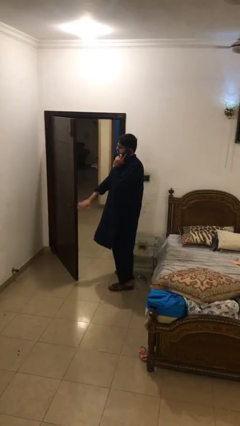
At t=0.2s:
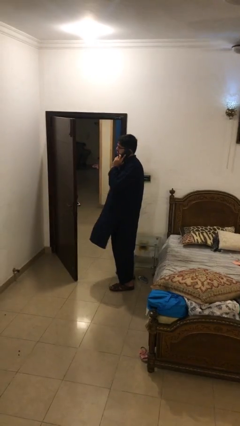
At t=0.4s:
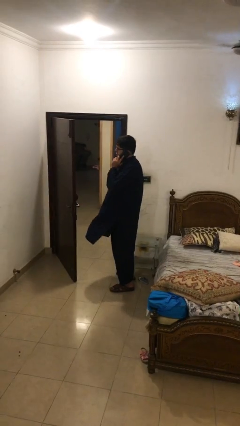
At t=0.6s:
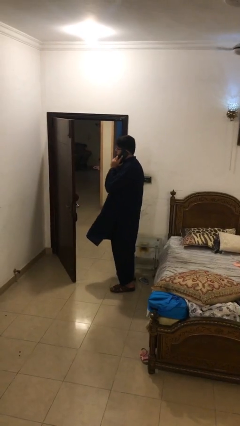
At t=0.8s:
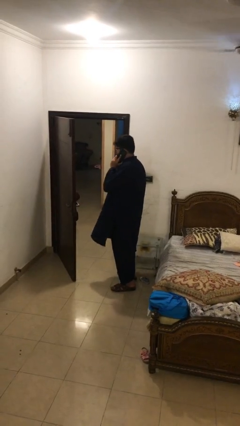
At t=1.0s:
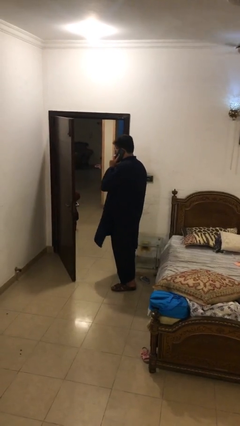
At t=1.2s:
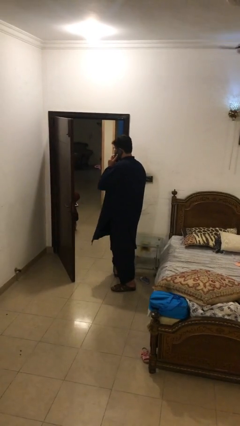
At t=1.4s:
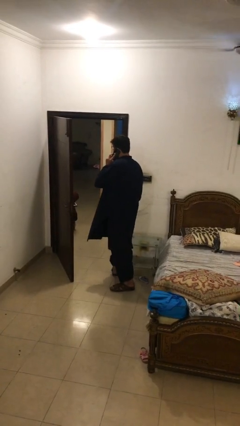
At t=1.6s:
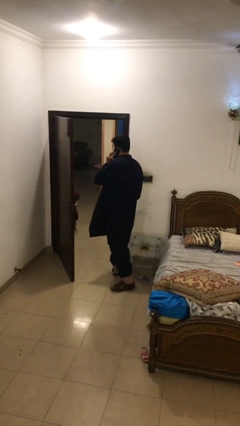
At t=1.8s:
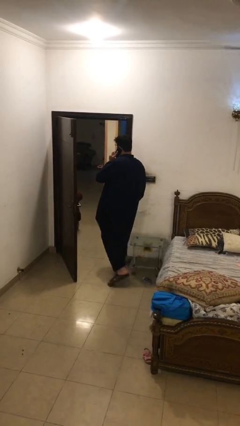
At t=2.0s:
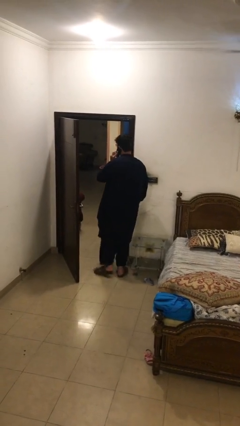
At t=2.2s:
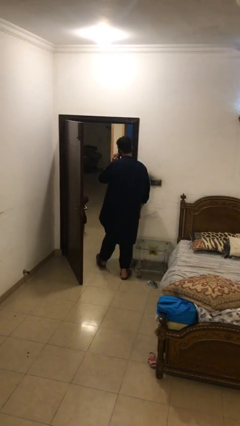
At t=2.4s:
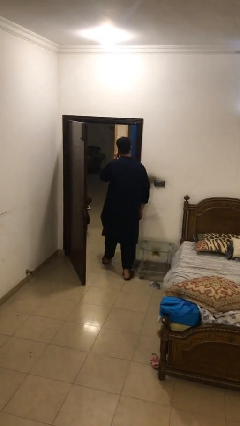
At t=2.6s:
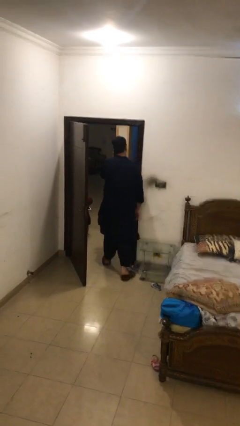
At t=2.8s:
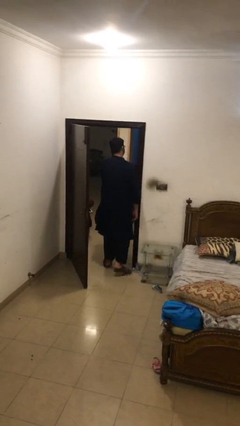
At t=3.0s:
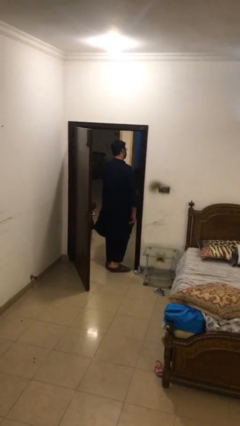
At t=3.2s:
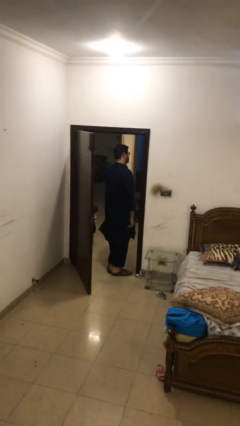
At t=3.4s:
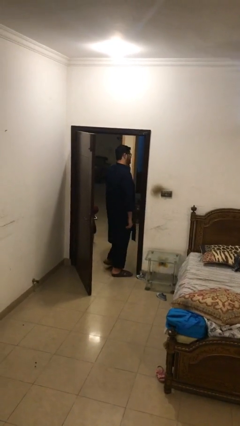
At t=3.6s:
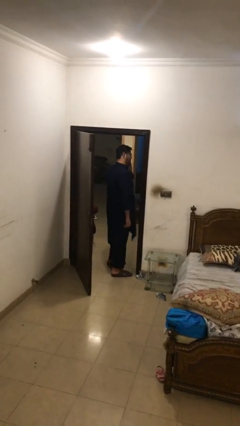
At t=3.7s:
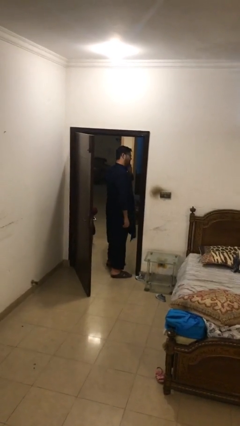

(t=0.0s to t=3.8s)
person exits scene through structure

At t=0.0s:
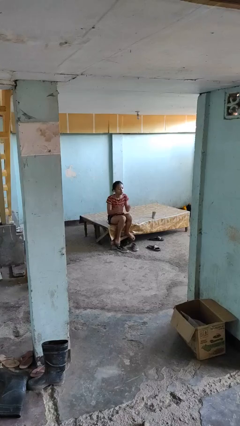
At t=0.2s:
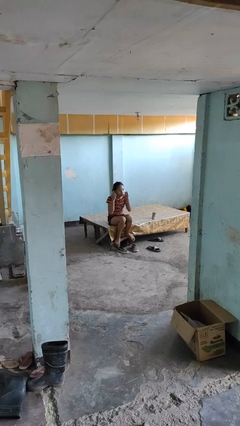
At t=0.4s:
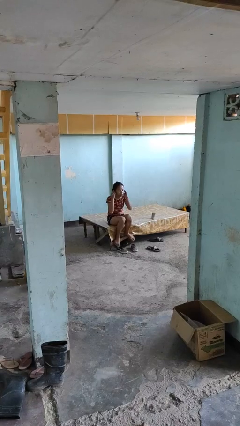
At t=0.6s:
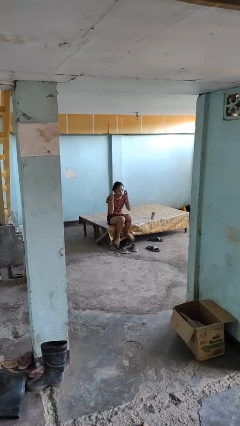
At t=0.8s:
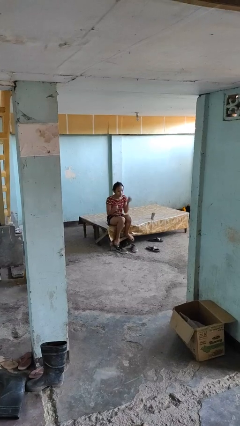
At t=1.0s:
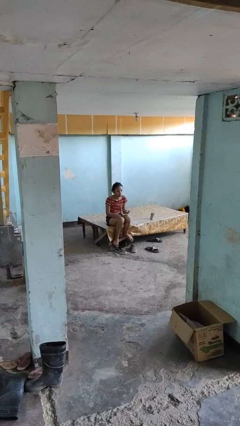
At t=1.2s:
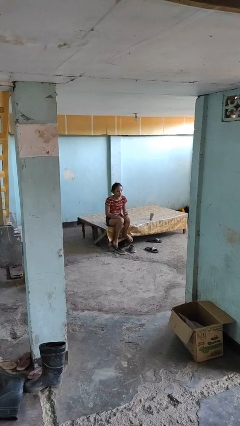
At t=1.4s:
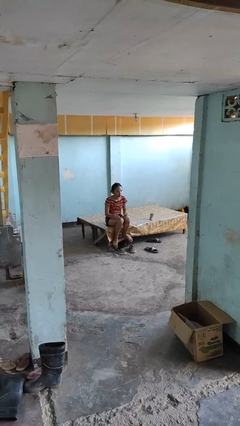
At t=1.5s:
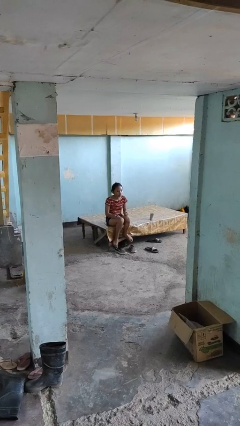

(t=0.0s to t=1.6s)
person takes off headphones

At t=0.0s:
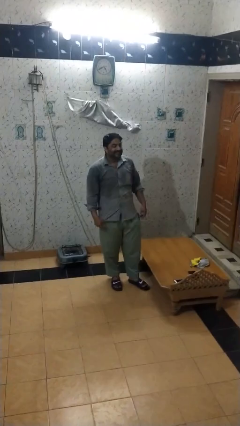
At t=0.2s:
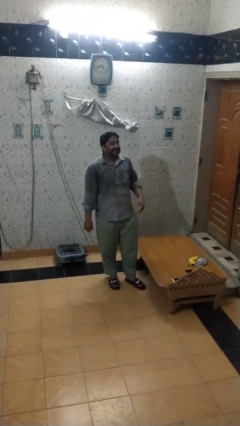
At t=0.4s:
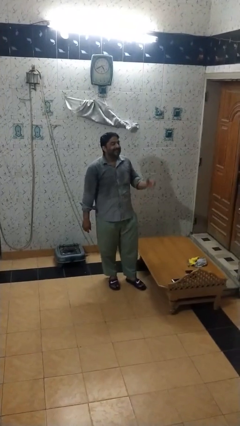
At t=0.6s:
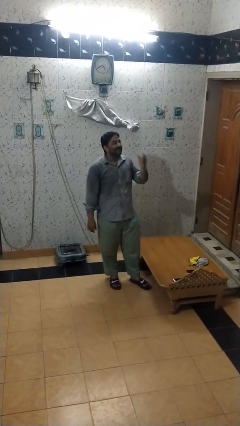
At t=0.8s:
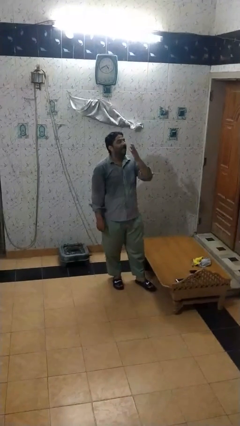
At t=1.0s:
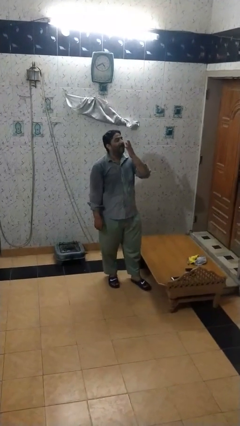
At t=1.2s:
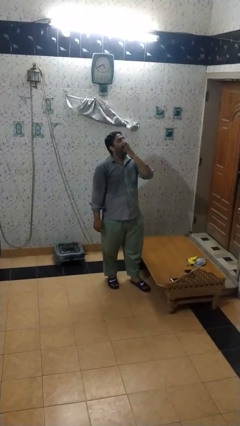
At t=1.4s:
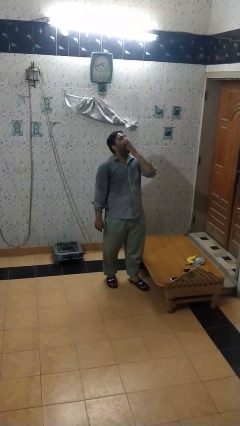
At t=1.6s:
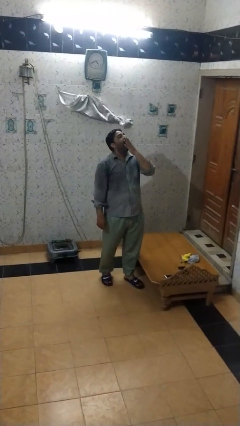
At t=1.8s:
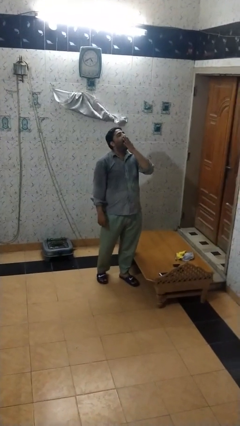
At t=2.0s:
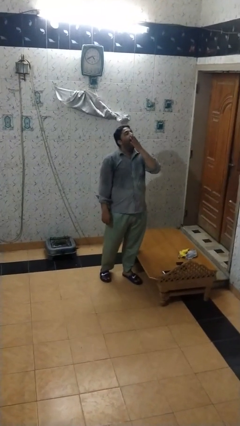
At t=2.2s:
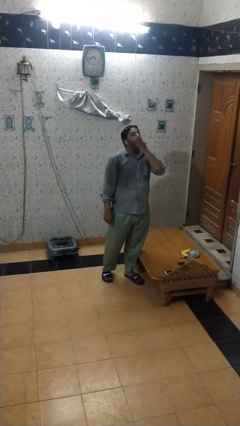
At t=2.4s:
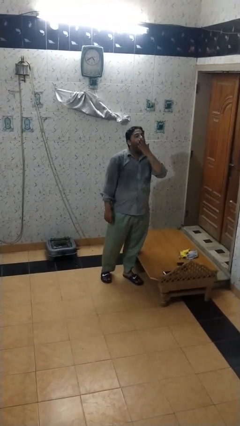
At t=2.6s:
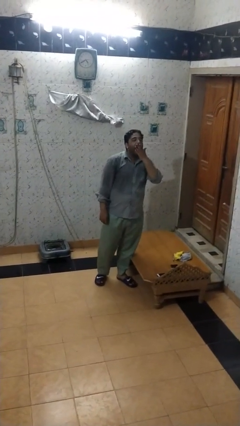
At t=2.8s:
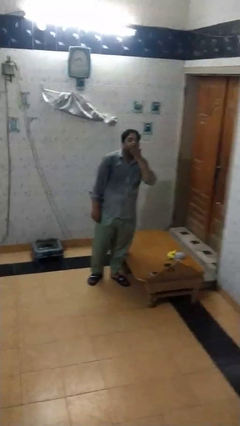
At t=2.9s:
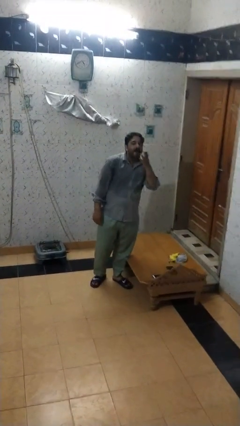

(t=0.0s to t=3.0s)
person yawns

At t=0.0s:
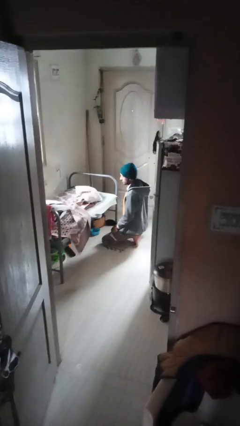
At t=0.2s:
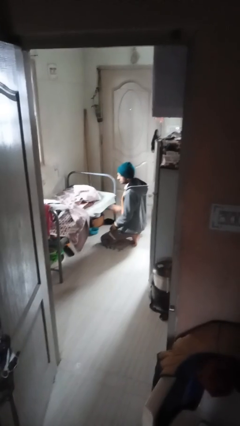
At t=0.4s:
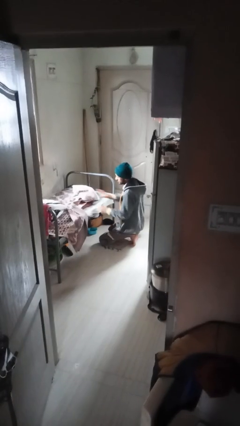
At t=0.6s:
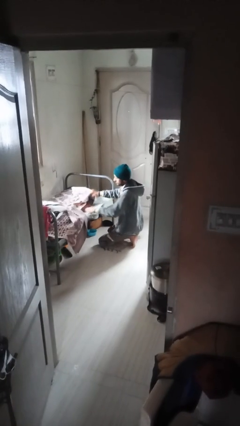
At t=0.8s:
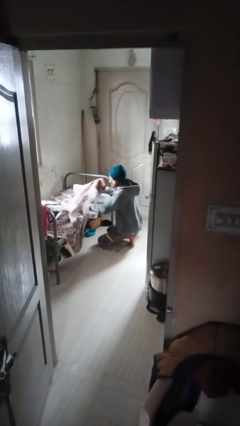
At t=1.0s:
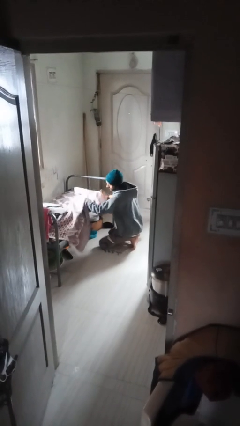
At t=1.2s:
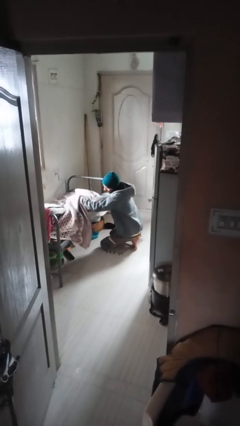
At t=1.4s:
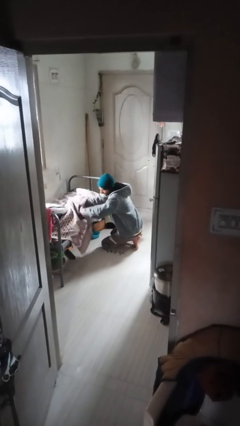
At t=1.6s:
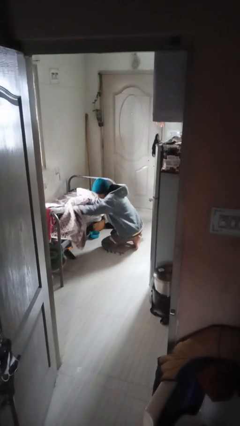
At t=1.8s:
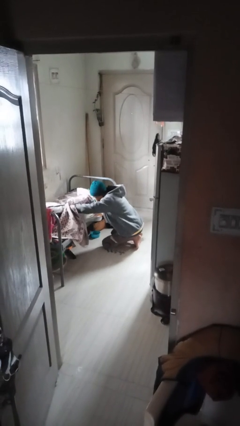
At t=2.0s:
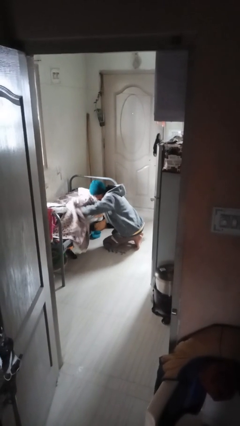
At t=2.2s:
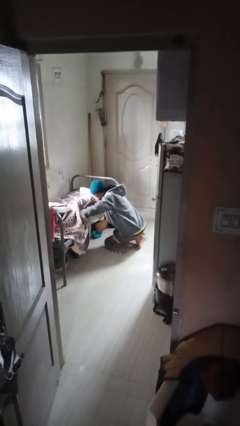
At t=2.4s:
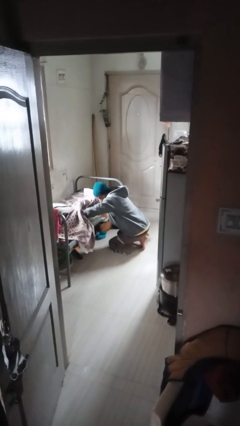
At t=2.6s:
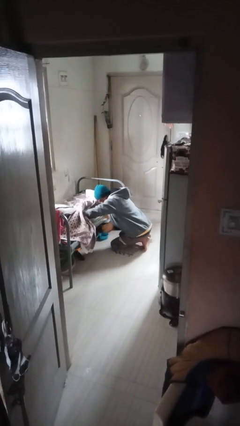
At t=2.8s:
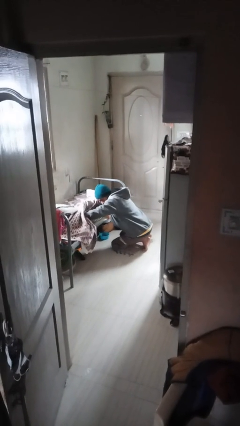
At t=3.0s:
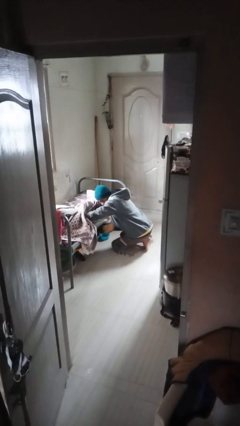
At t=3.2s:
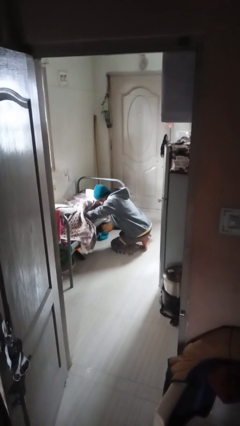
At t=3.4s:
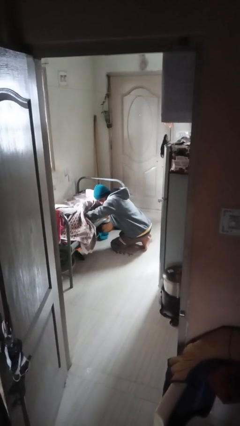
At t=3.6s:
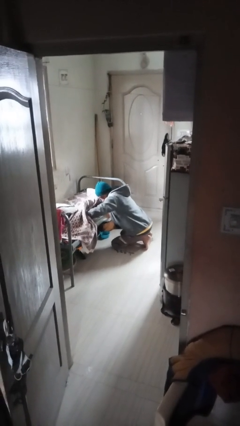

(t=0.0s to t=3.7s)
person searches under couch

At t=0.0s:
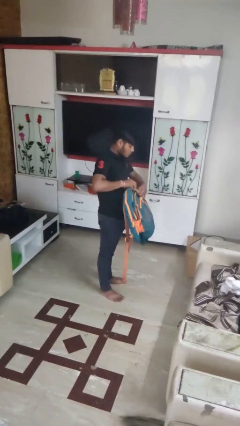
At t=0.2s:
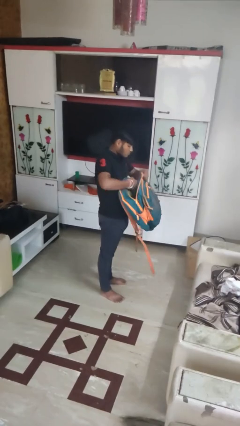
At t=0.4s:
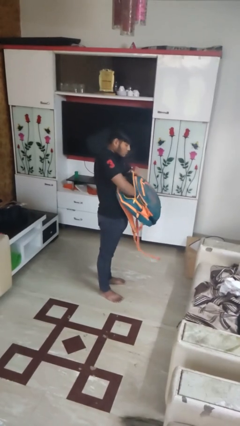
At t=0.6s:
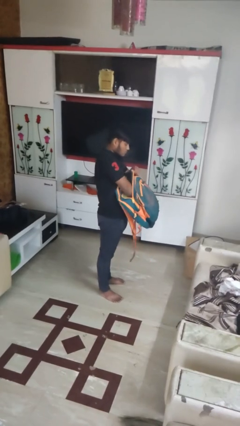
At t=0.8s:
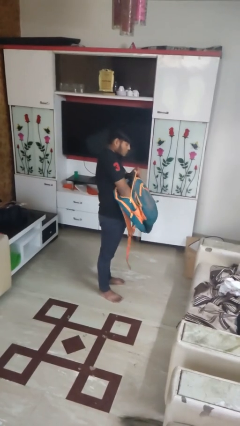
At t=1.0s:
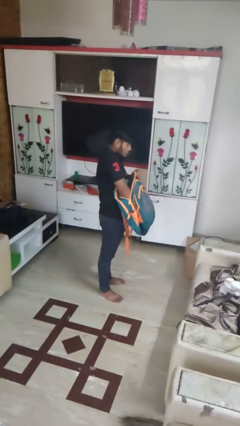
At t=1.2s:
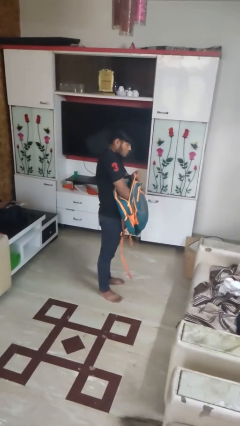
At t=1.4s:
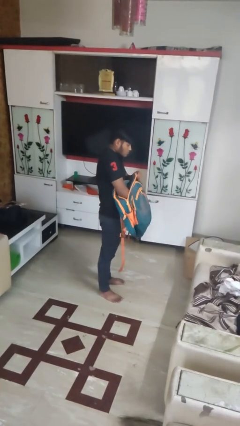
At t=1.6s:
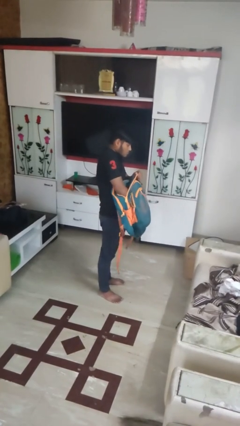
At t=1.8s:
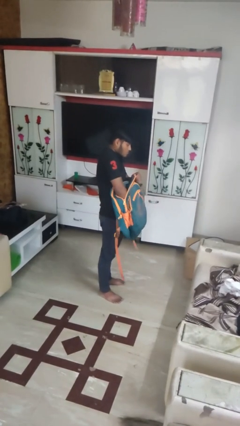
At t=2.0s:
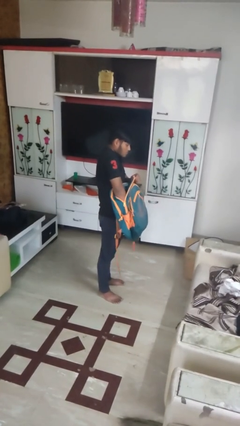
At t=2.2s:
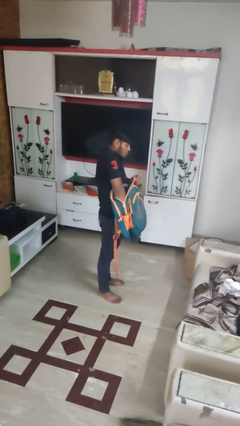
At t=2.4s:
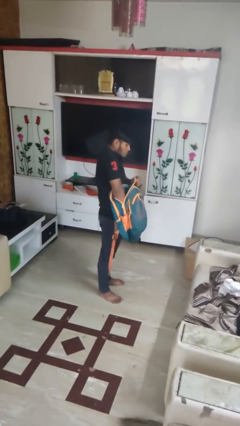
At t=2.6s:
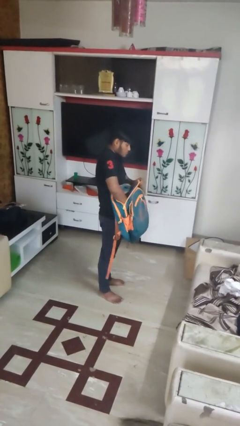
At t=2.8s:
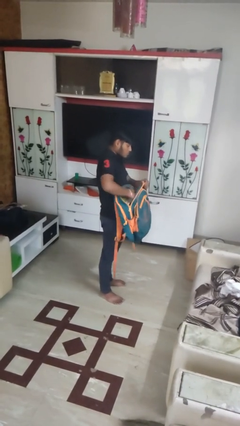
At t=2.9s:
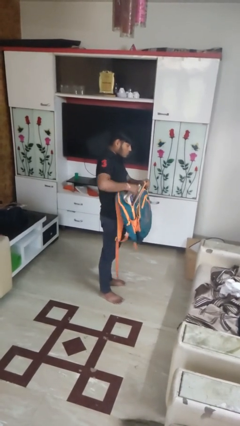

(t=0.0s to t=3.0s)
person searches in backpack

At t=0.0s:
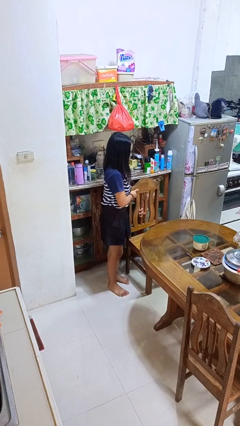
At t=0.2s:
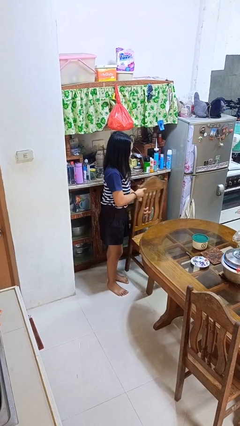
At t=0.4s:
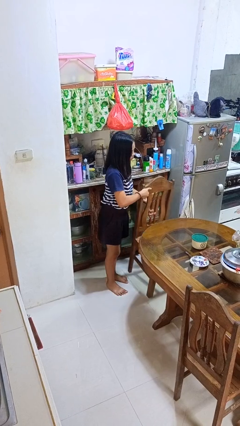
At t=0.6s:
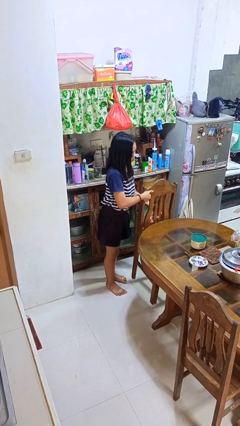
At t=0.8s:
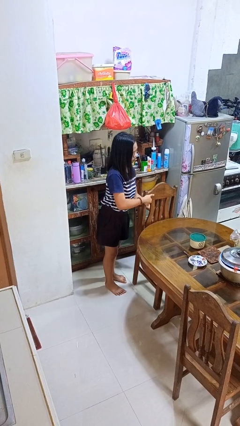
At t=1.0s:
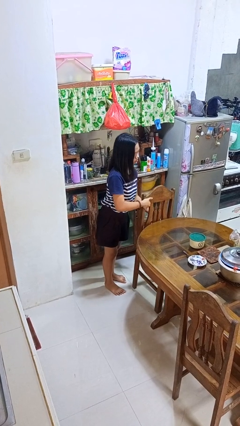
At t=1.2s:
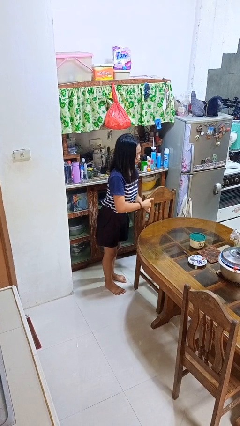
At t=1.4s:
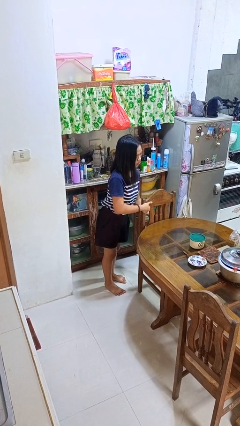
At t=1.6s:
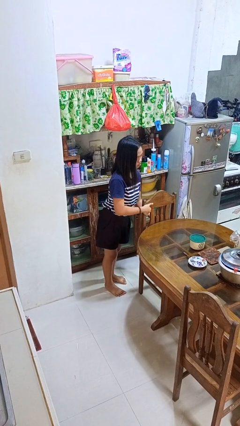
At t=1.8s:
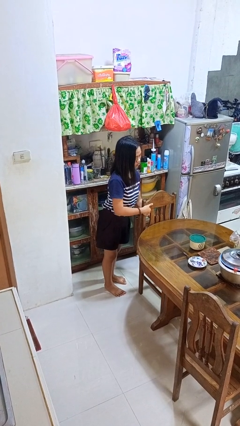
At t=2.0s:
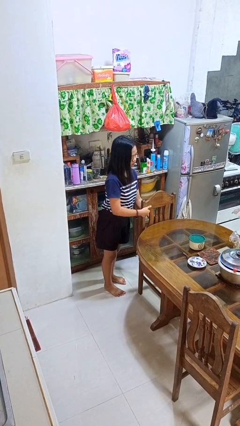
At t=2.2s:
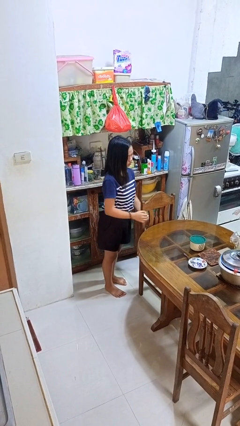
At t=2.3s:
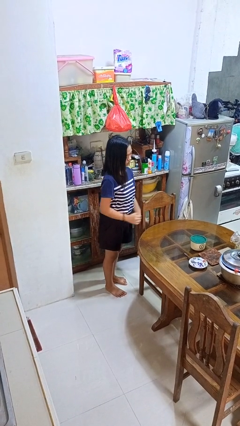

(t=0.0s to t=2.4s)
person pushes in chair
